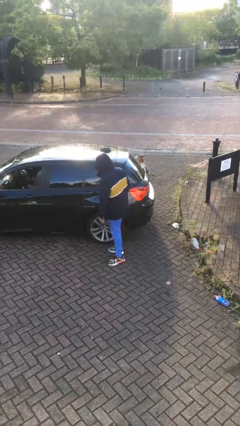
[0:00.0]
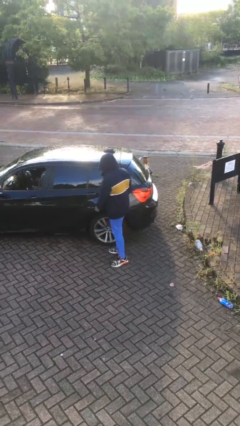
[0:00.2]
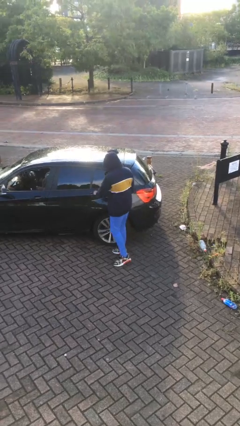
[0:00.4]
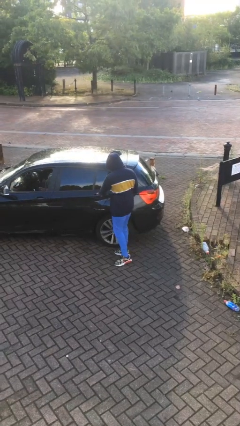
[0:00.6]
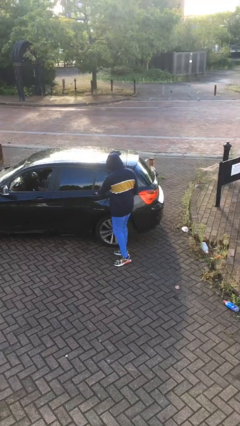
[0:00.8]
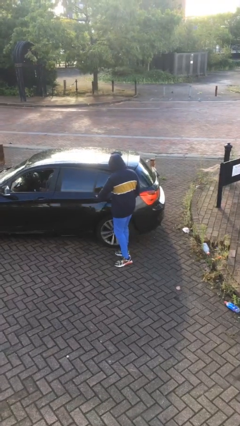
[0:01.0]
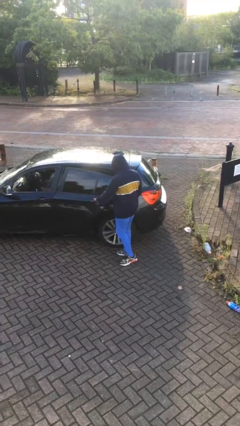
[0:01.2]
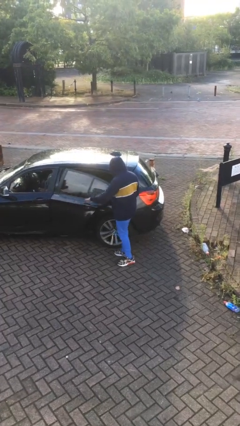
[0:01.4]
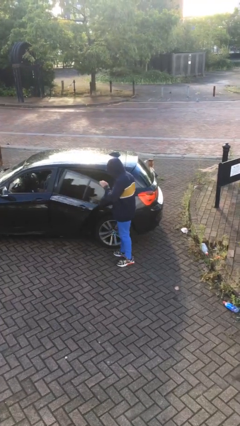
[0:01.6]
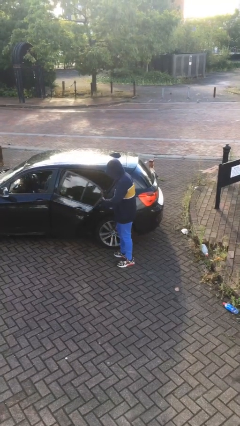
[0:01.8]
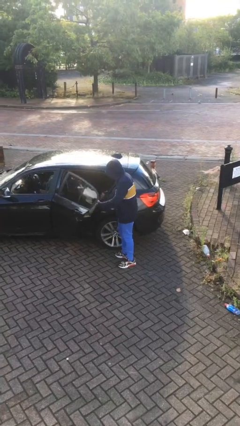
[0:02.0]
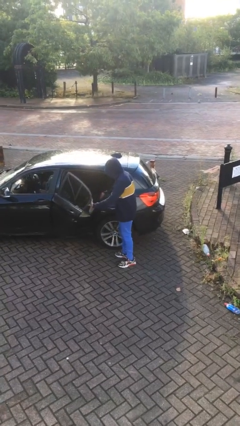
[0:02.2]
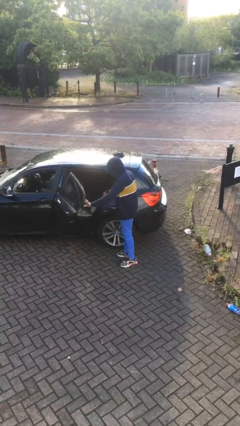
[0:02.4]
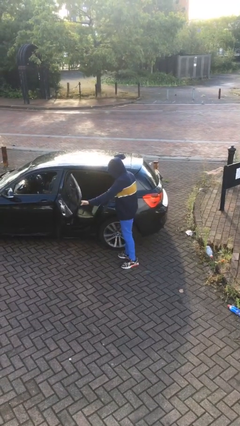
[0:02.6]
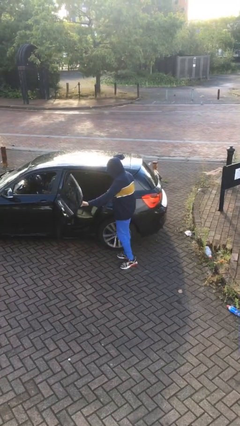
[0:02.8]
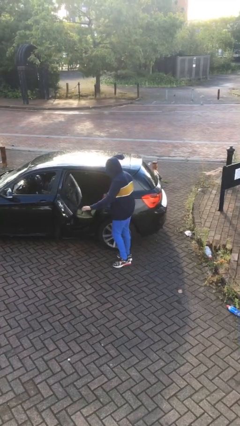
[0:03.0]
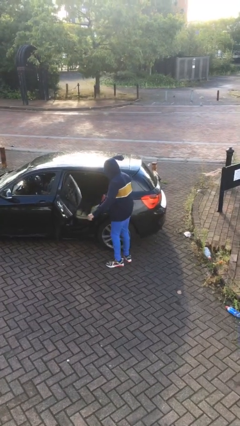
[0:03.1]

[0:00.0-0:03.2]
person opens car door

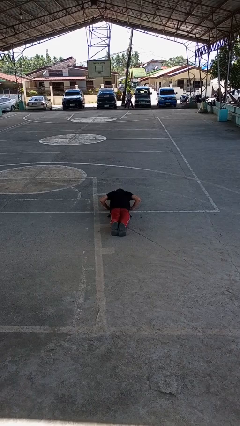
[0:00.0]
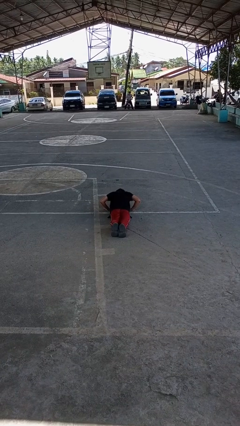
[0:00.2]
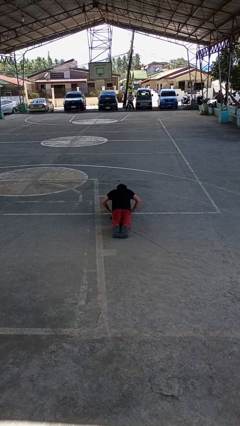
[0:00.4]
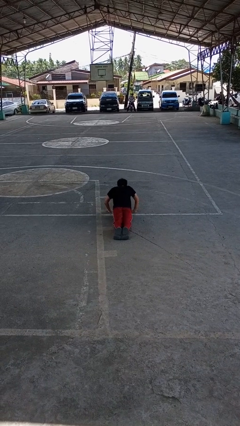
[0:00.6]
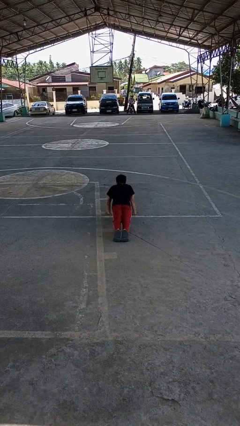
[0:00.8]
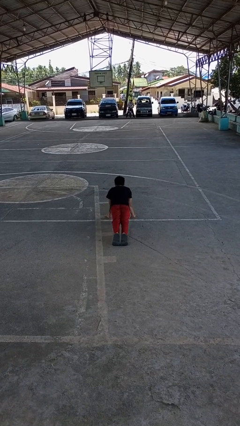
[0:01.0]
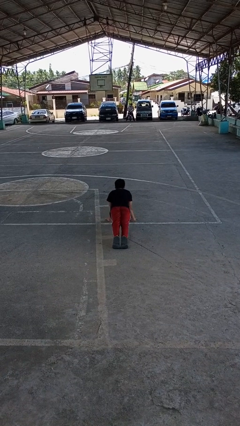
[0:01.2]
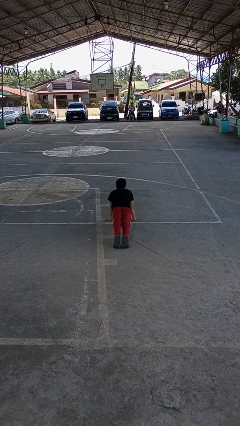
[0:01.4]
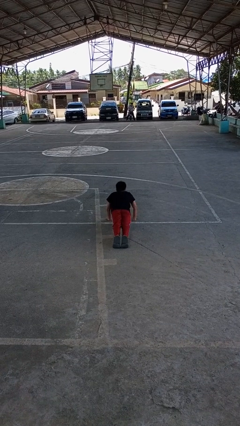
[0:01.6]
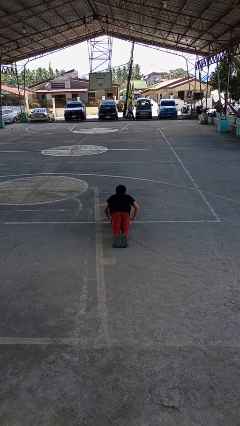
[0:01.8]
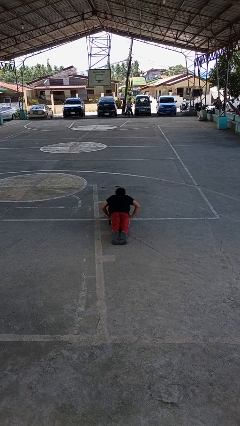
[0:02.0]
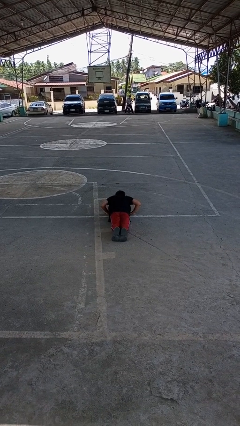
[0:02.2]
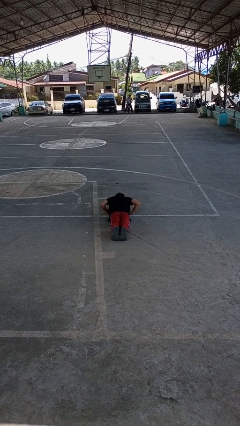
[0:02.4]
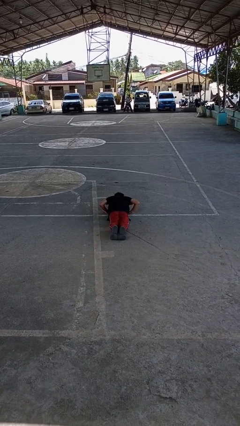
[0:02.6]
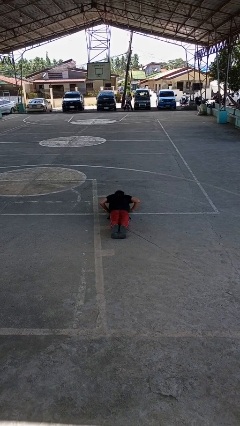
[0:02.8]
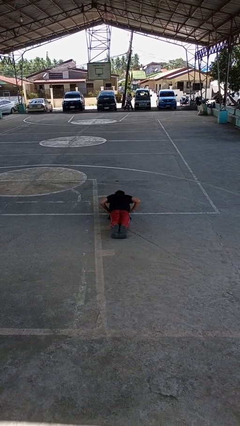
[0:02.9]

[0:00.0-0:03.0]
person exercises with pushup

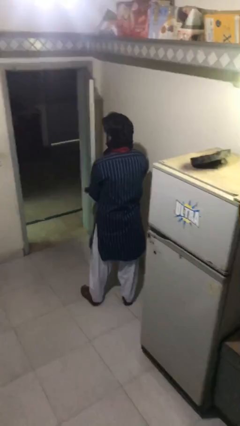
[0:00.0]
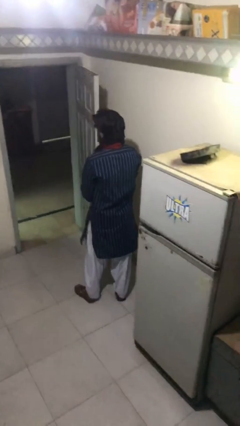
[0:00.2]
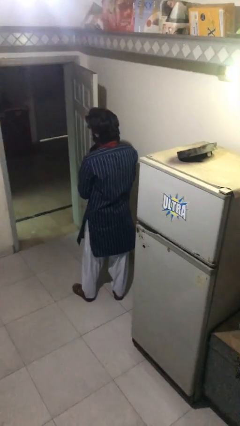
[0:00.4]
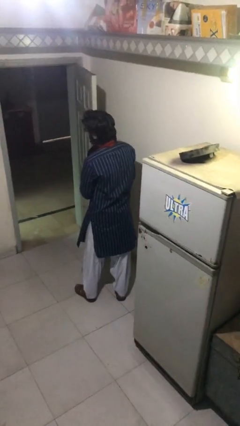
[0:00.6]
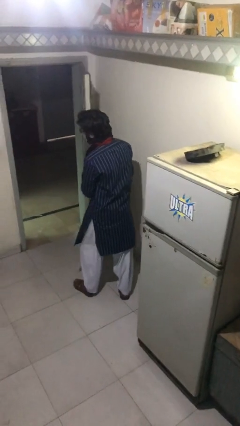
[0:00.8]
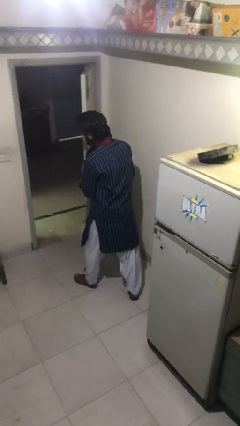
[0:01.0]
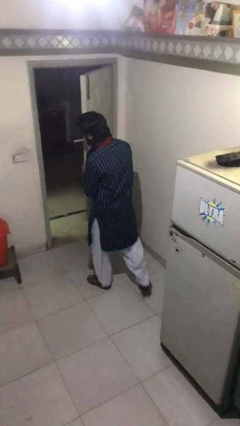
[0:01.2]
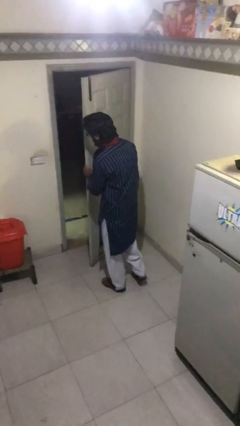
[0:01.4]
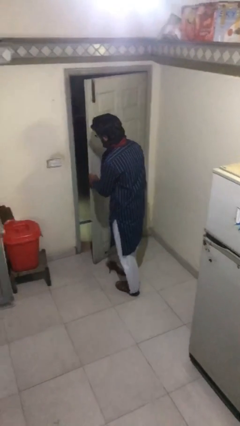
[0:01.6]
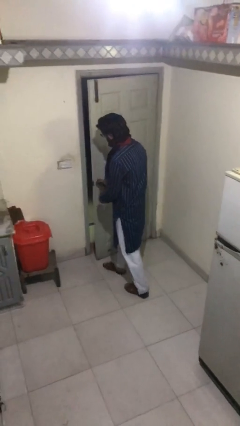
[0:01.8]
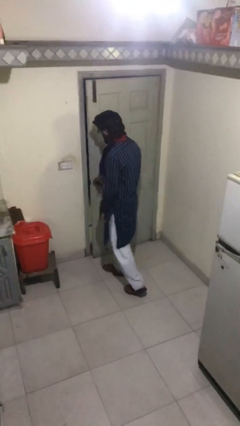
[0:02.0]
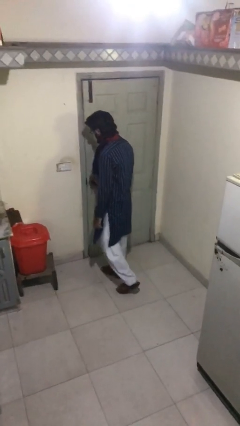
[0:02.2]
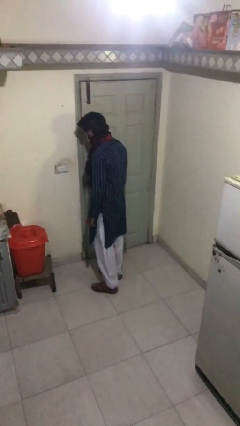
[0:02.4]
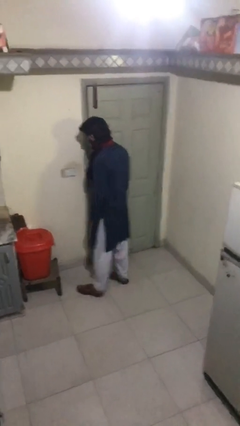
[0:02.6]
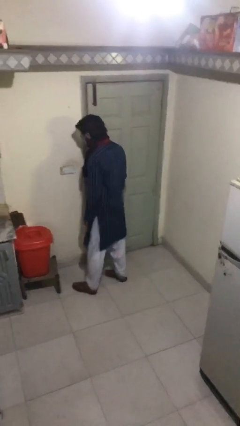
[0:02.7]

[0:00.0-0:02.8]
person closes facility door

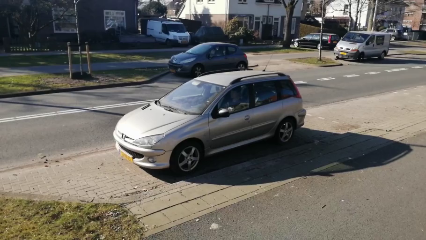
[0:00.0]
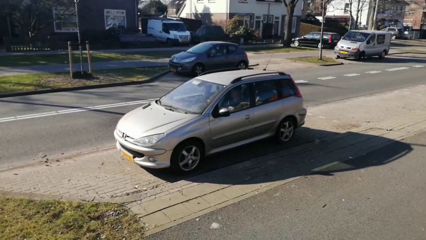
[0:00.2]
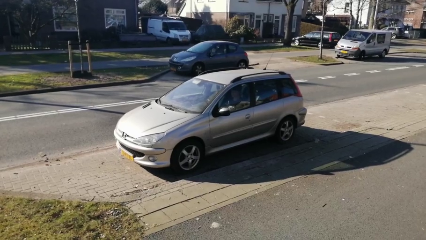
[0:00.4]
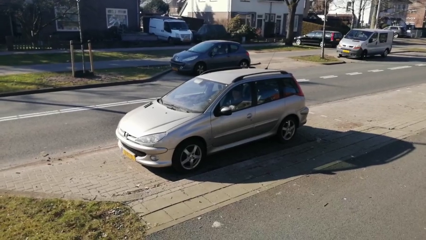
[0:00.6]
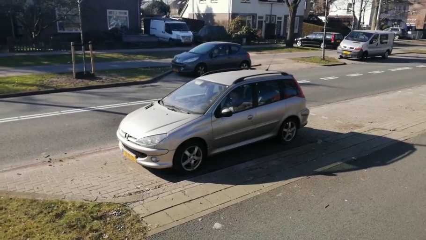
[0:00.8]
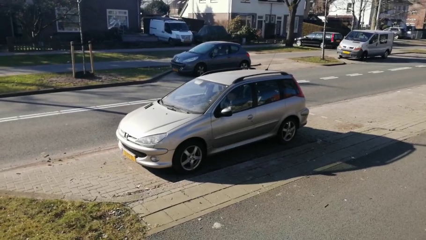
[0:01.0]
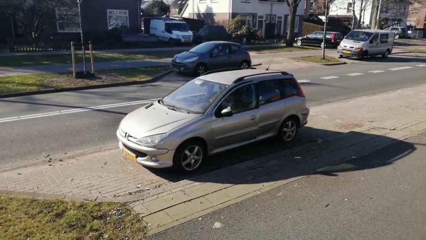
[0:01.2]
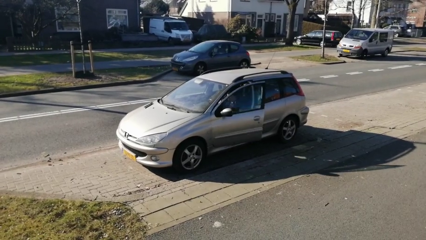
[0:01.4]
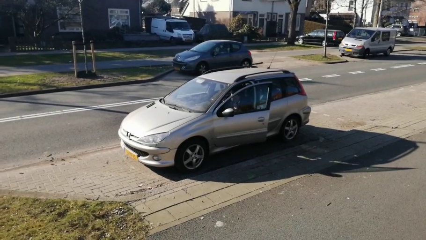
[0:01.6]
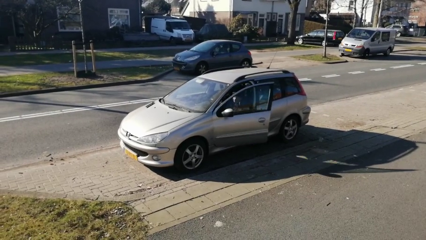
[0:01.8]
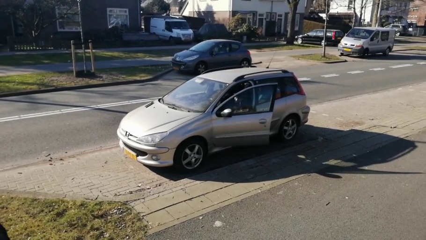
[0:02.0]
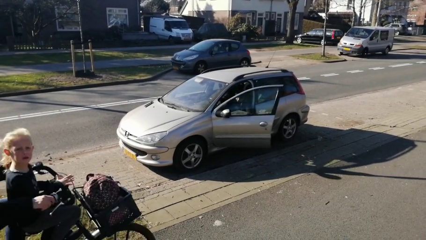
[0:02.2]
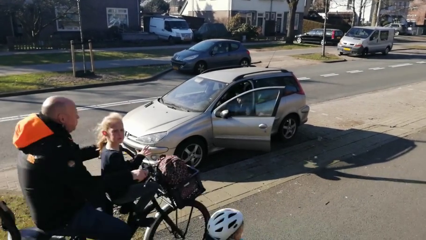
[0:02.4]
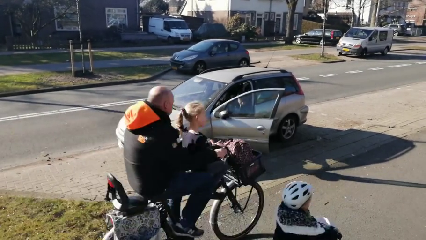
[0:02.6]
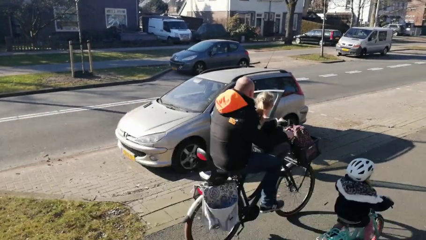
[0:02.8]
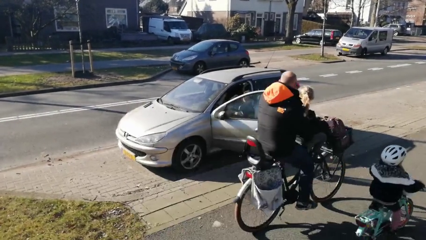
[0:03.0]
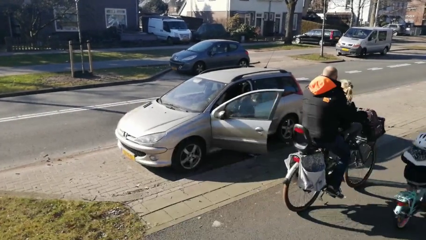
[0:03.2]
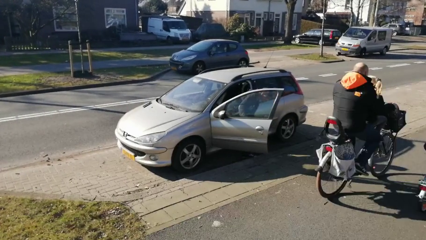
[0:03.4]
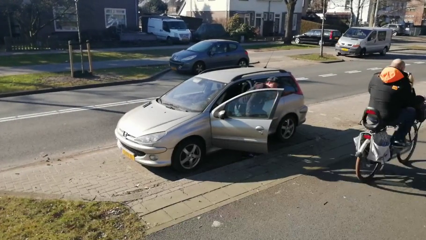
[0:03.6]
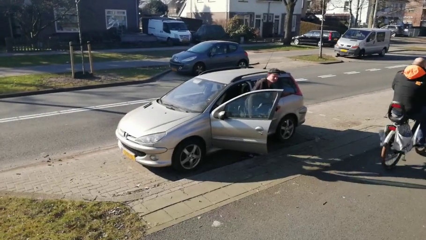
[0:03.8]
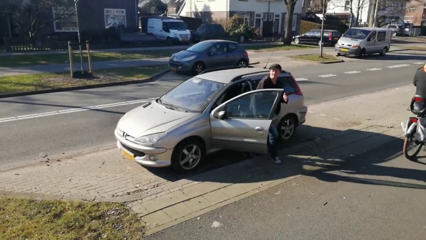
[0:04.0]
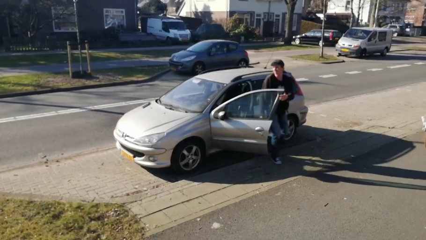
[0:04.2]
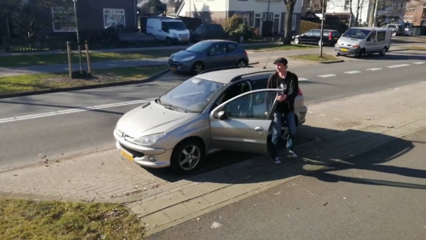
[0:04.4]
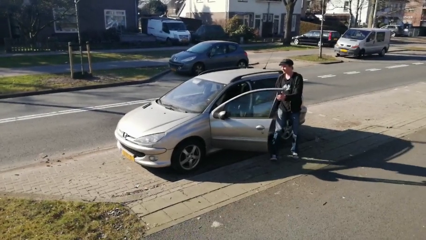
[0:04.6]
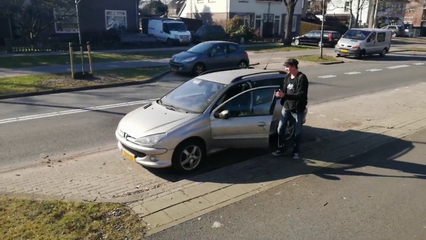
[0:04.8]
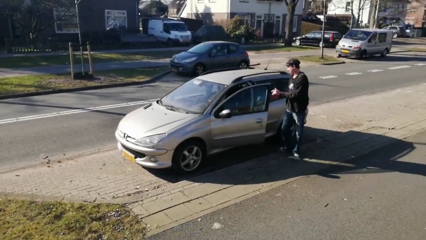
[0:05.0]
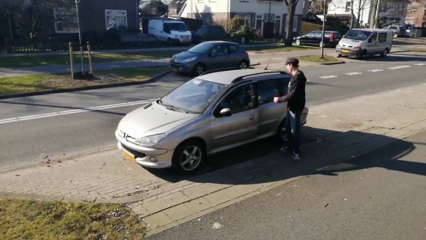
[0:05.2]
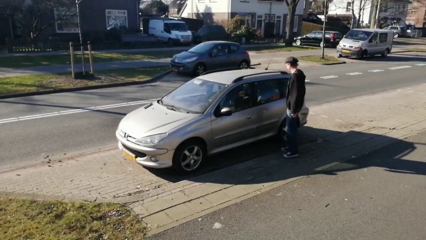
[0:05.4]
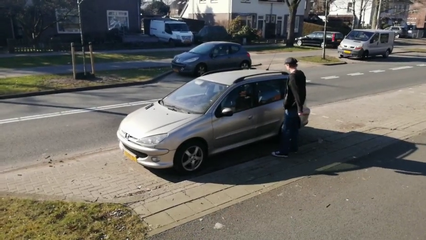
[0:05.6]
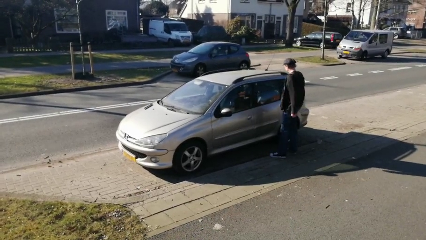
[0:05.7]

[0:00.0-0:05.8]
car drops off person

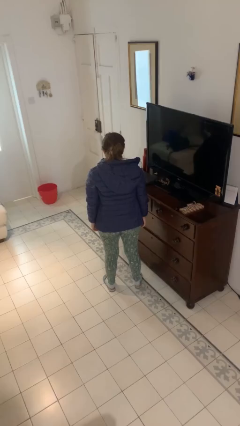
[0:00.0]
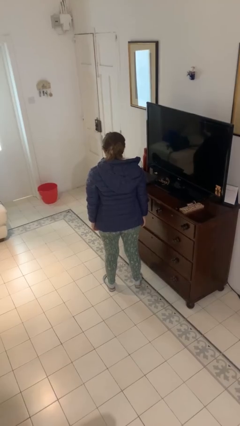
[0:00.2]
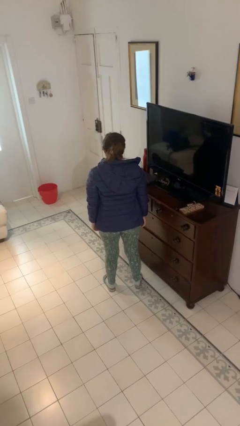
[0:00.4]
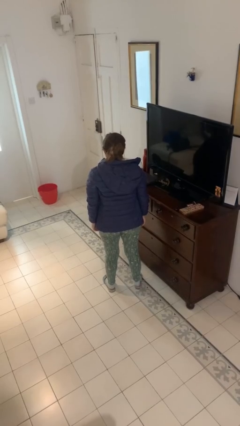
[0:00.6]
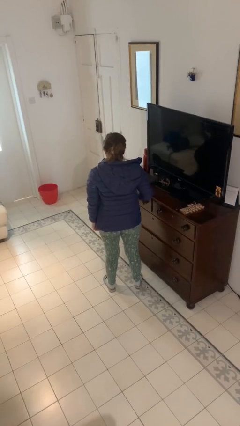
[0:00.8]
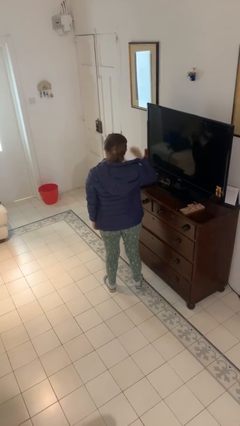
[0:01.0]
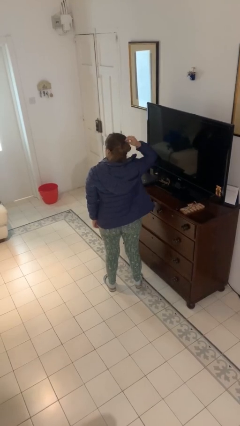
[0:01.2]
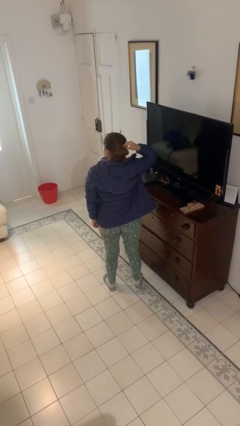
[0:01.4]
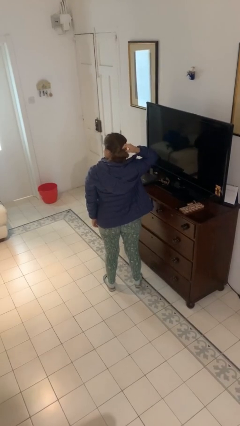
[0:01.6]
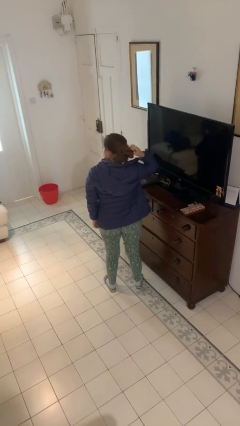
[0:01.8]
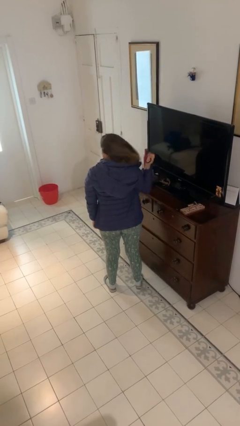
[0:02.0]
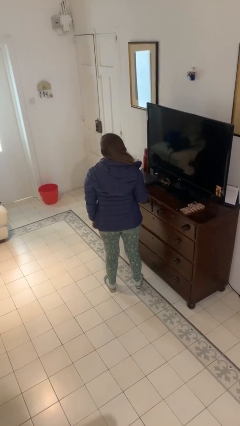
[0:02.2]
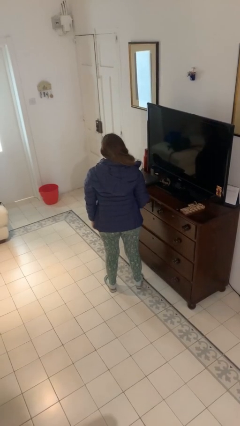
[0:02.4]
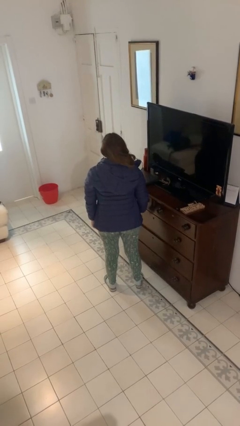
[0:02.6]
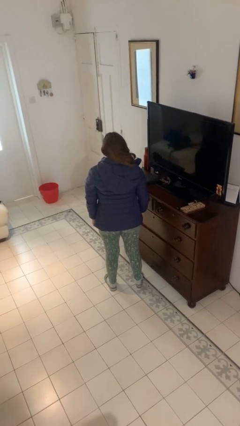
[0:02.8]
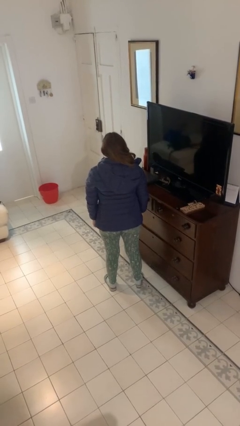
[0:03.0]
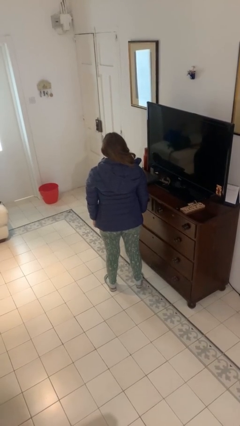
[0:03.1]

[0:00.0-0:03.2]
person takes off hairtie
